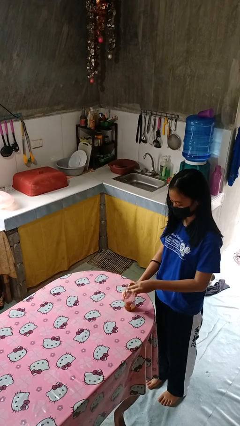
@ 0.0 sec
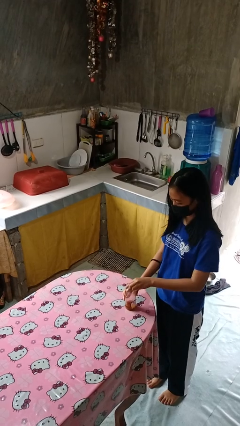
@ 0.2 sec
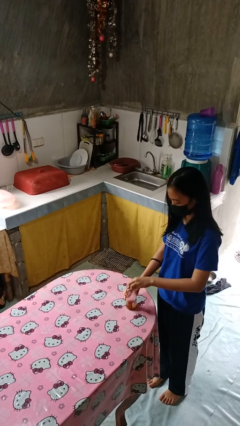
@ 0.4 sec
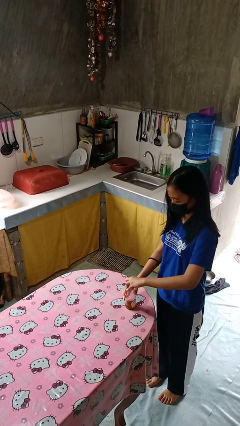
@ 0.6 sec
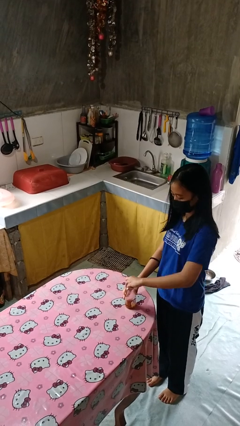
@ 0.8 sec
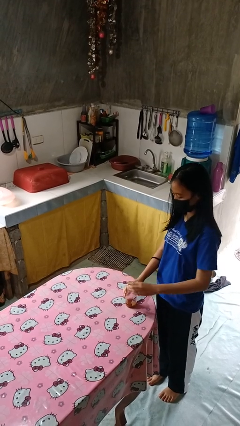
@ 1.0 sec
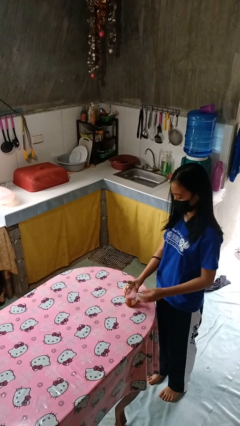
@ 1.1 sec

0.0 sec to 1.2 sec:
person closes jar

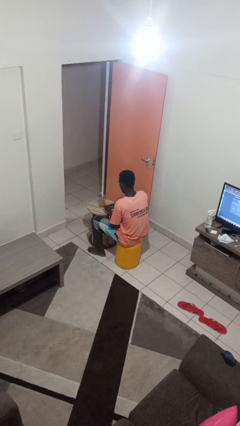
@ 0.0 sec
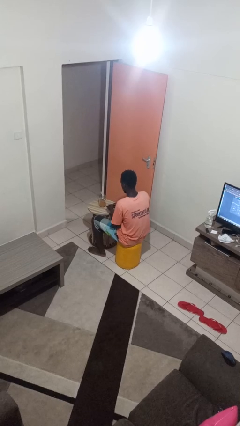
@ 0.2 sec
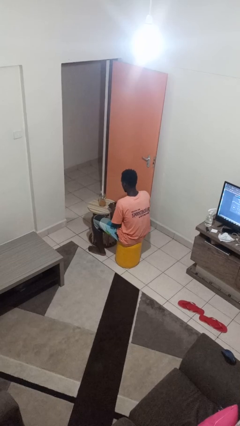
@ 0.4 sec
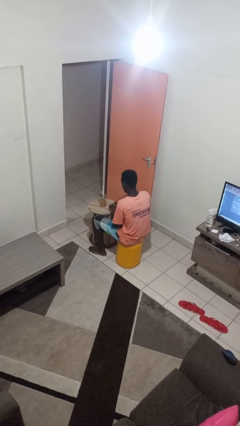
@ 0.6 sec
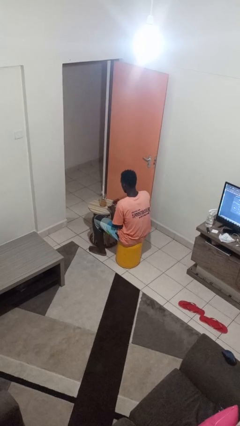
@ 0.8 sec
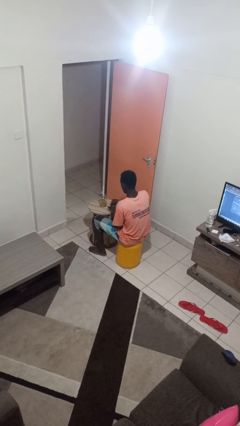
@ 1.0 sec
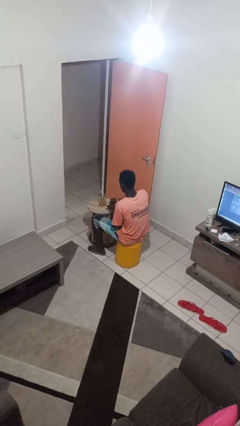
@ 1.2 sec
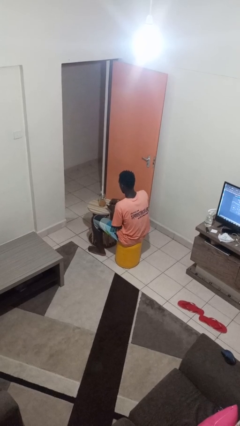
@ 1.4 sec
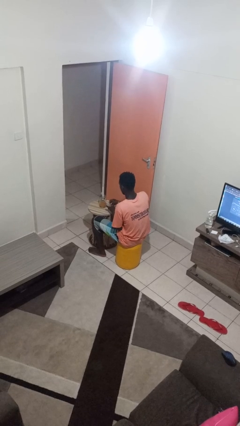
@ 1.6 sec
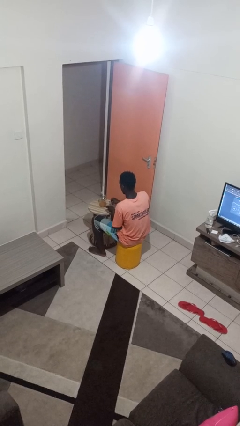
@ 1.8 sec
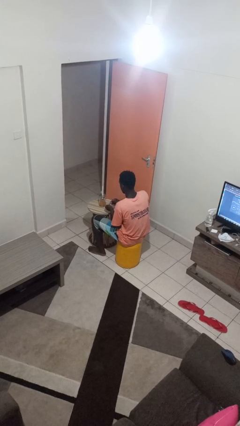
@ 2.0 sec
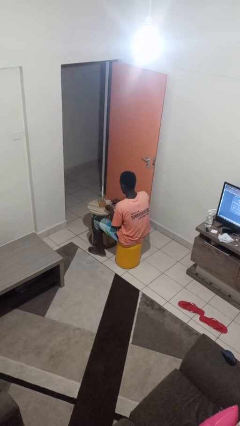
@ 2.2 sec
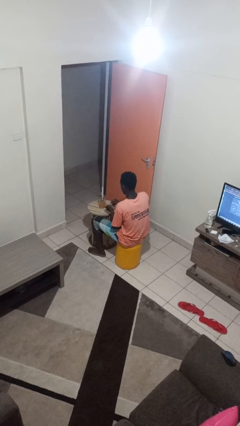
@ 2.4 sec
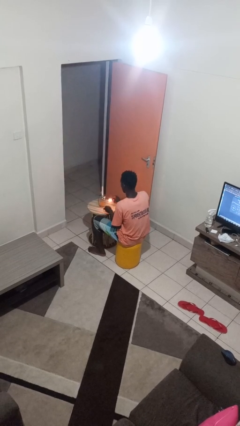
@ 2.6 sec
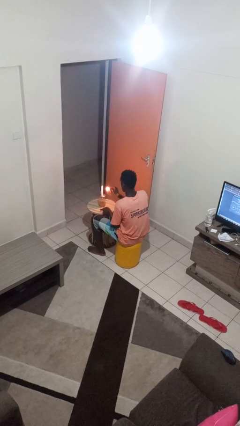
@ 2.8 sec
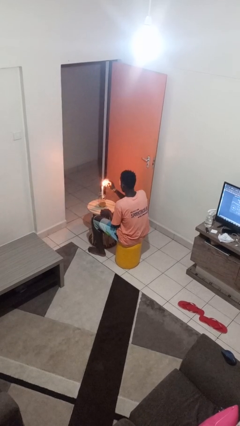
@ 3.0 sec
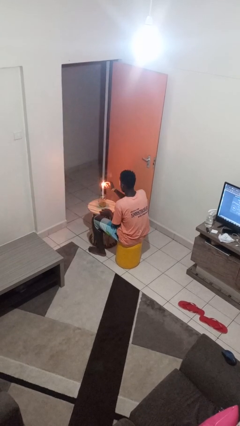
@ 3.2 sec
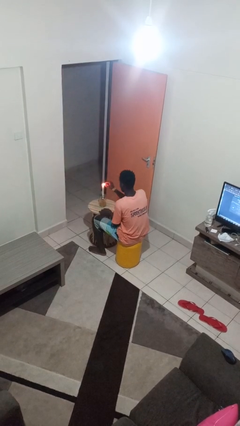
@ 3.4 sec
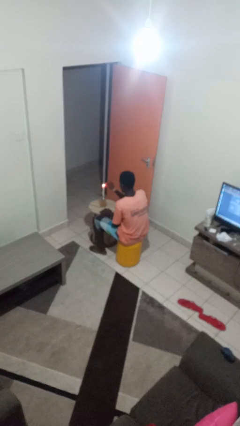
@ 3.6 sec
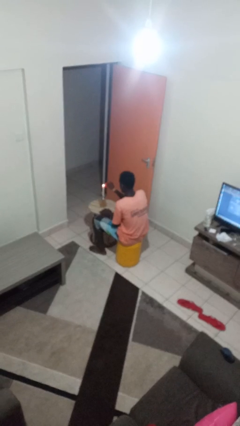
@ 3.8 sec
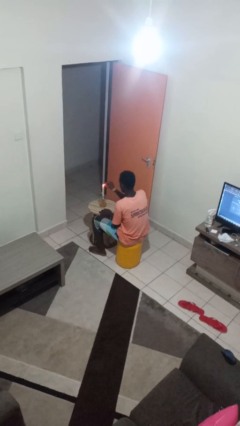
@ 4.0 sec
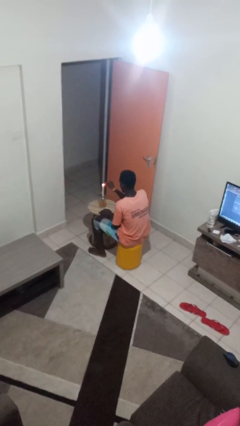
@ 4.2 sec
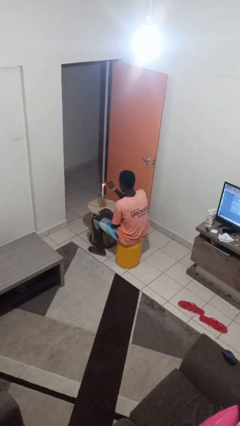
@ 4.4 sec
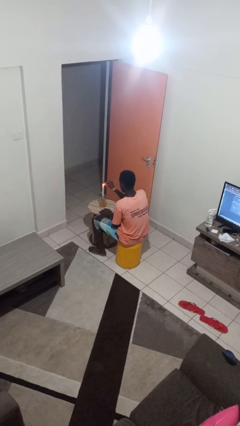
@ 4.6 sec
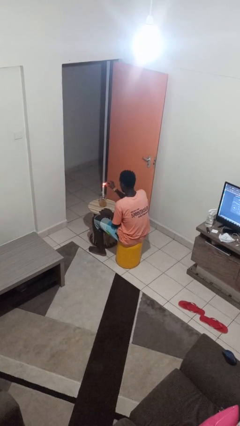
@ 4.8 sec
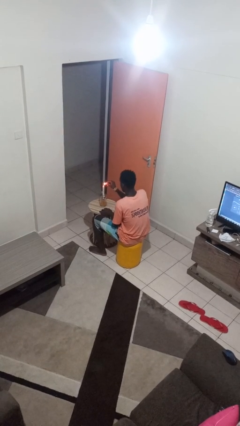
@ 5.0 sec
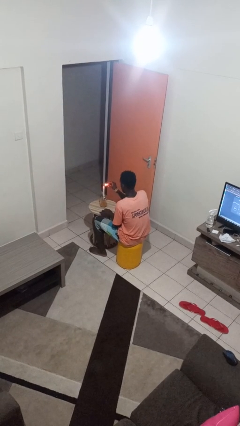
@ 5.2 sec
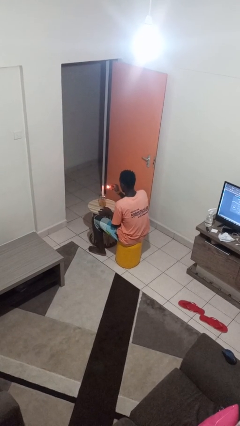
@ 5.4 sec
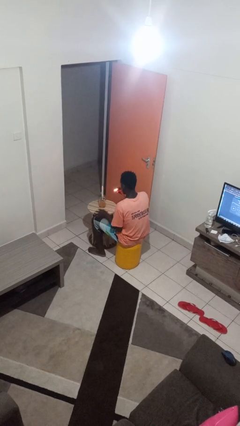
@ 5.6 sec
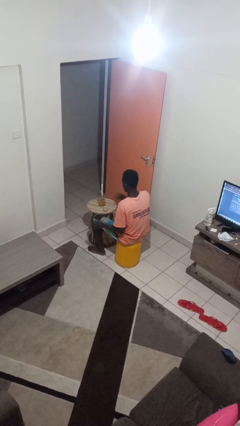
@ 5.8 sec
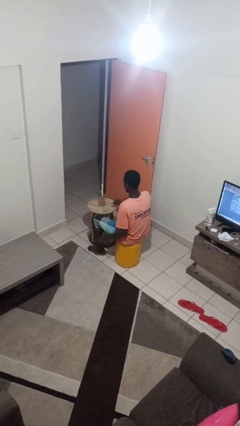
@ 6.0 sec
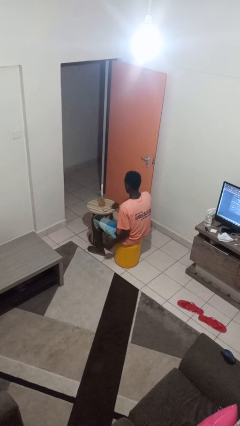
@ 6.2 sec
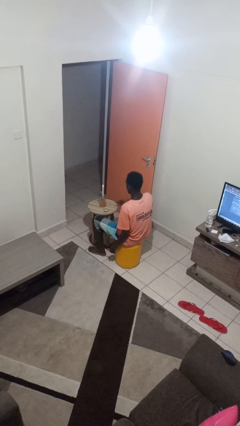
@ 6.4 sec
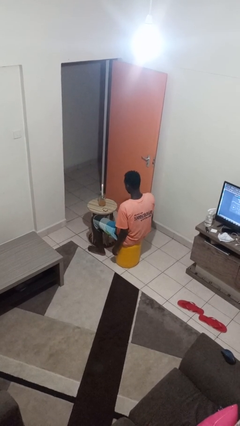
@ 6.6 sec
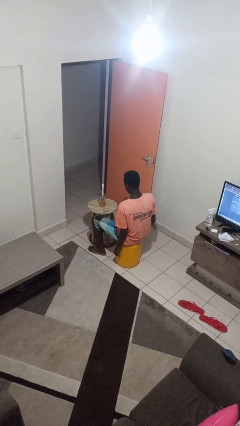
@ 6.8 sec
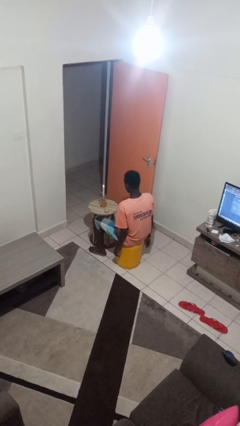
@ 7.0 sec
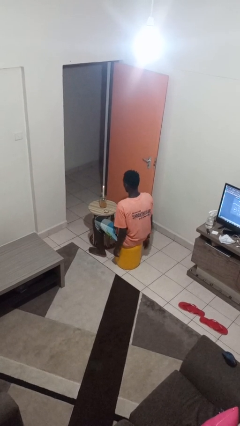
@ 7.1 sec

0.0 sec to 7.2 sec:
person lights candle

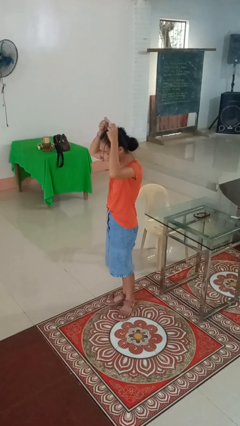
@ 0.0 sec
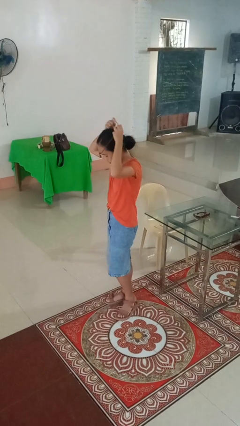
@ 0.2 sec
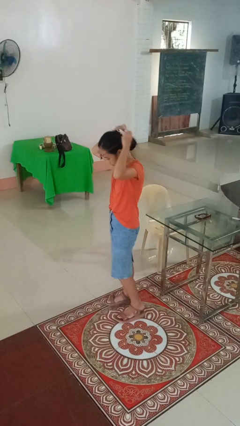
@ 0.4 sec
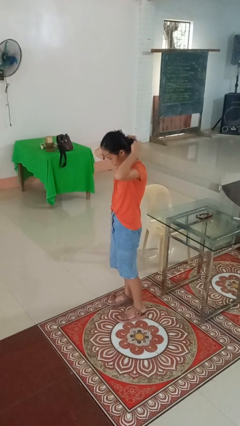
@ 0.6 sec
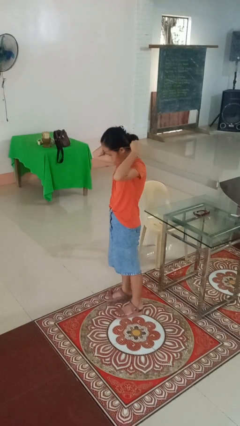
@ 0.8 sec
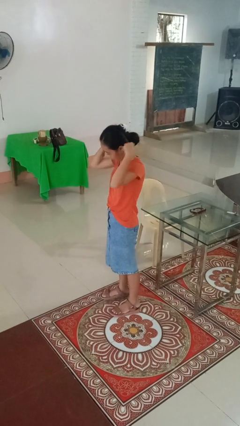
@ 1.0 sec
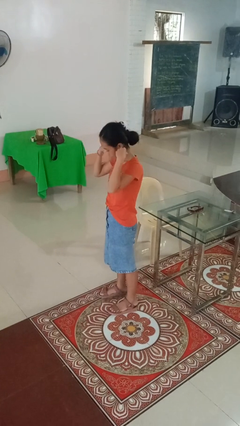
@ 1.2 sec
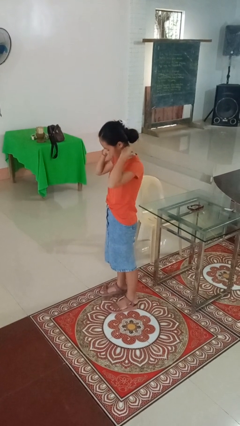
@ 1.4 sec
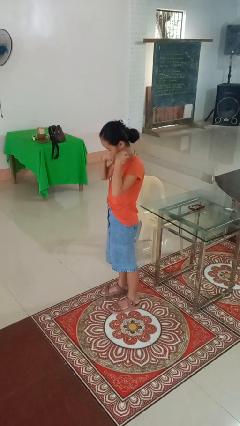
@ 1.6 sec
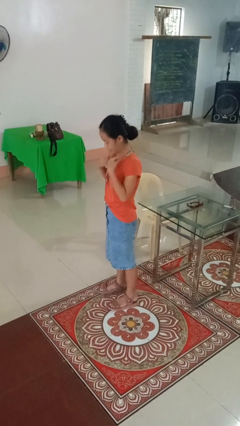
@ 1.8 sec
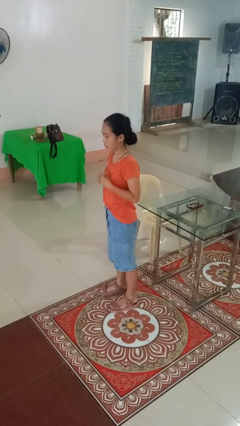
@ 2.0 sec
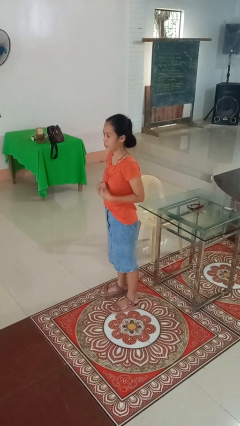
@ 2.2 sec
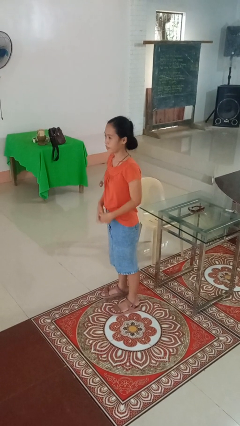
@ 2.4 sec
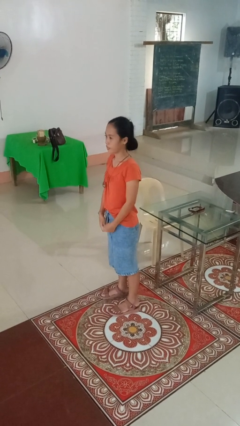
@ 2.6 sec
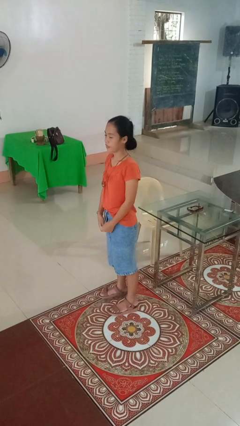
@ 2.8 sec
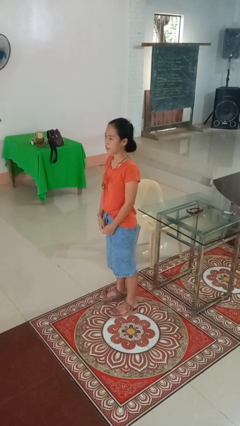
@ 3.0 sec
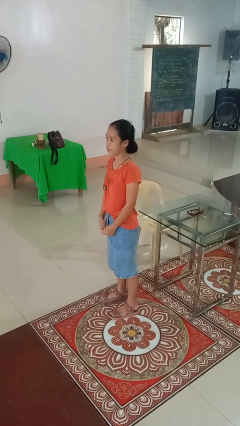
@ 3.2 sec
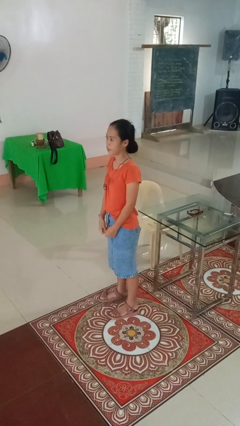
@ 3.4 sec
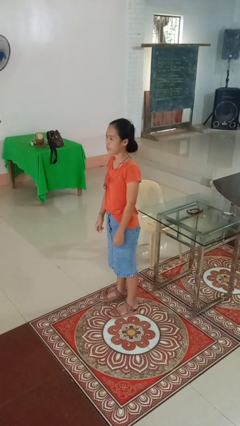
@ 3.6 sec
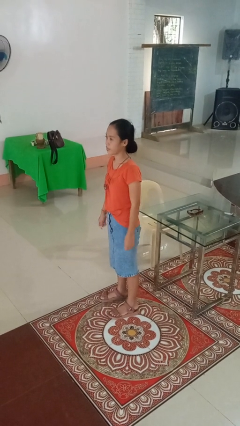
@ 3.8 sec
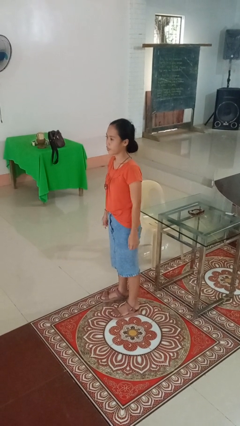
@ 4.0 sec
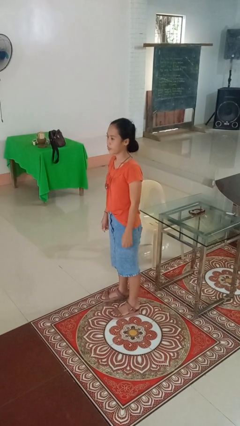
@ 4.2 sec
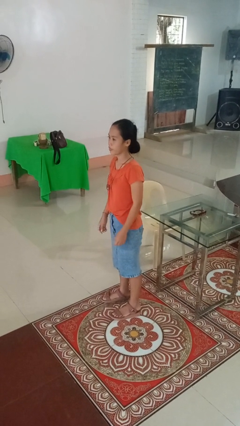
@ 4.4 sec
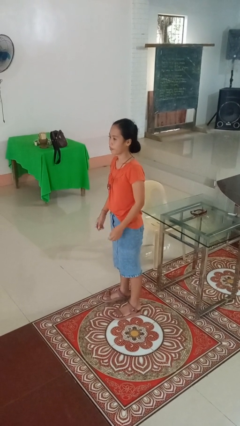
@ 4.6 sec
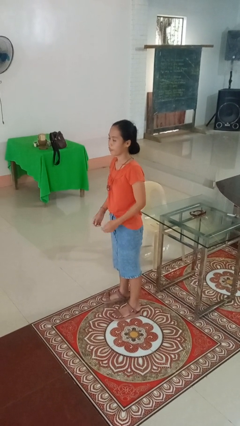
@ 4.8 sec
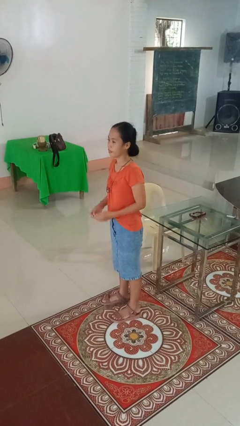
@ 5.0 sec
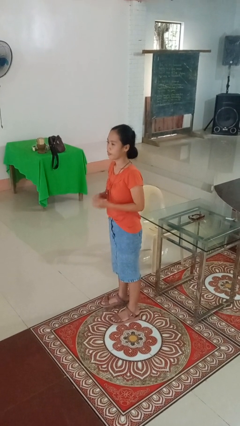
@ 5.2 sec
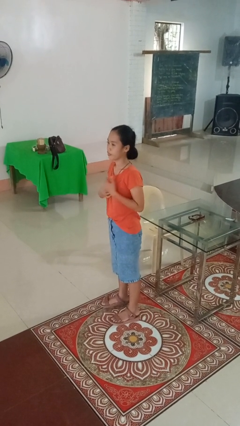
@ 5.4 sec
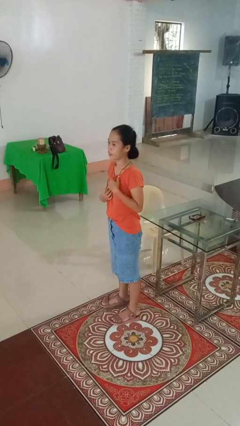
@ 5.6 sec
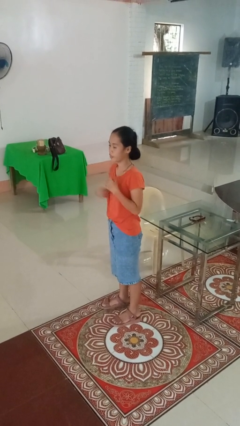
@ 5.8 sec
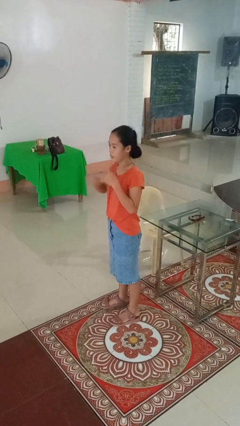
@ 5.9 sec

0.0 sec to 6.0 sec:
person puts on necklace

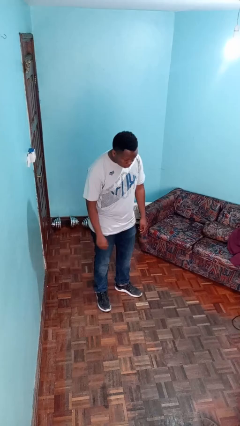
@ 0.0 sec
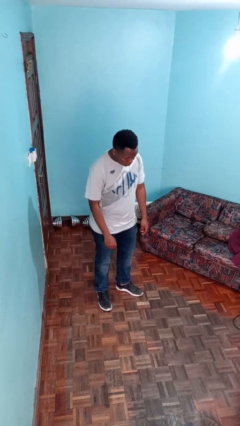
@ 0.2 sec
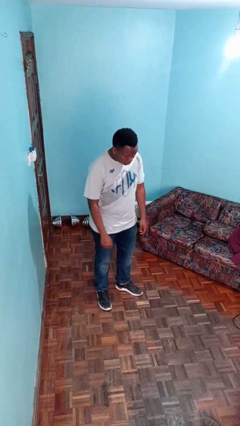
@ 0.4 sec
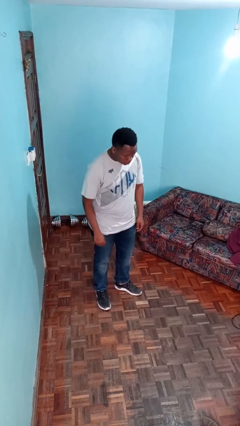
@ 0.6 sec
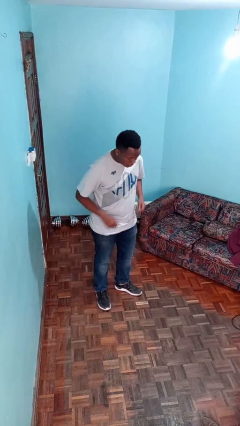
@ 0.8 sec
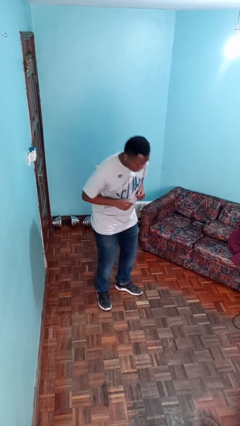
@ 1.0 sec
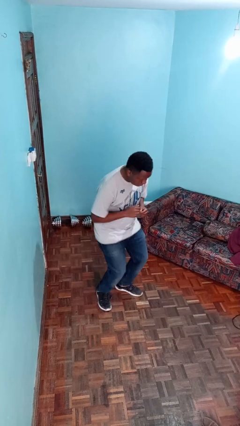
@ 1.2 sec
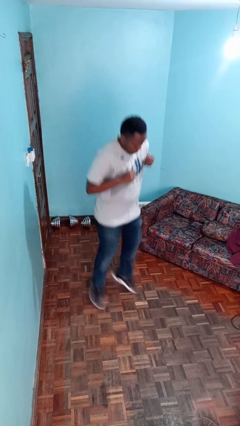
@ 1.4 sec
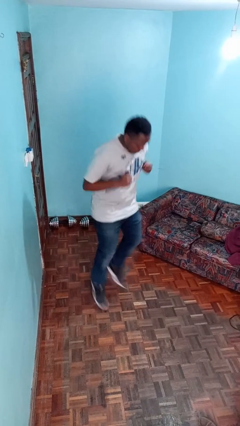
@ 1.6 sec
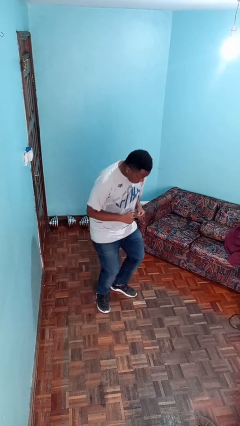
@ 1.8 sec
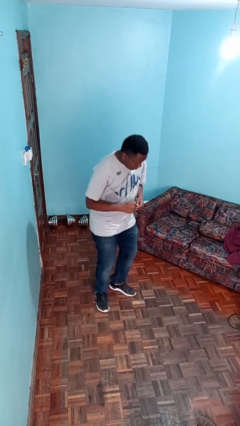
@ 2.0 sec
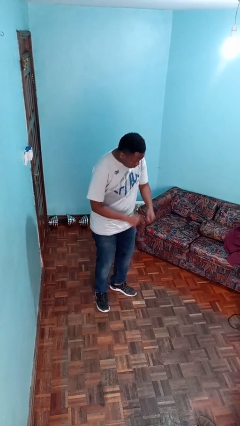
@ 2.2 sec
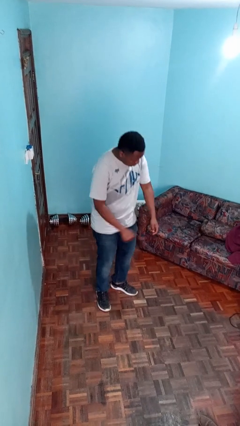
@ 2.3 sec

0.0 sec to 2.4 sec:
person jumps

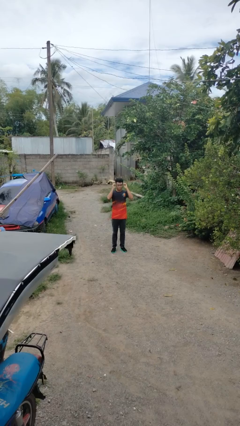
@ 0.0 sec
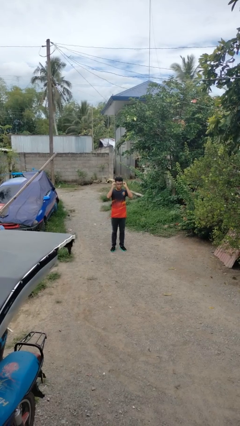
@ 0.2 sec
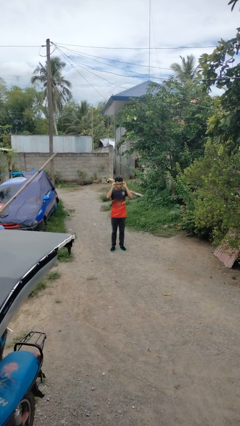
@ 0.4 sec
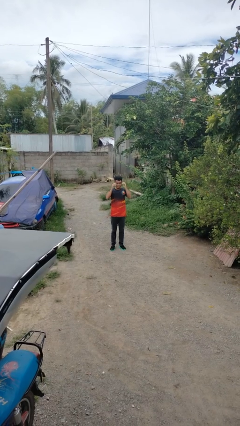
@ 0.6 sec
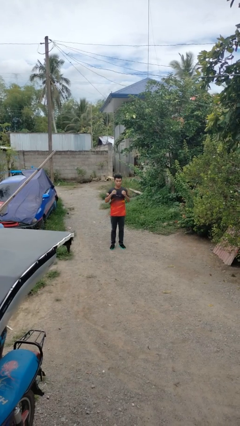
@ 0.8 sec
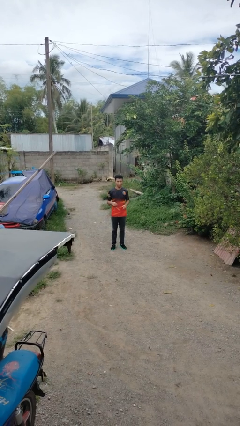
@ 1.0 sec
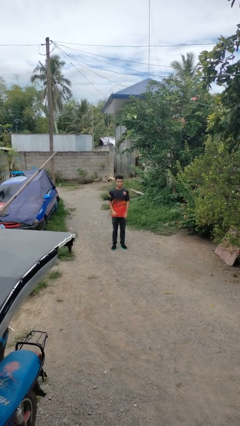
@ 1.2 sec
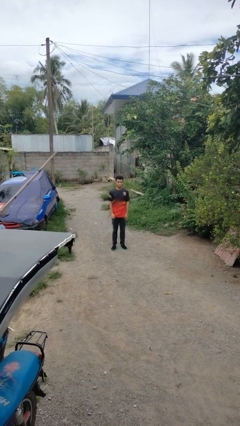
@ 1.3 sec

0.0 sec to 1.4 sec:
person takes off glasses
